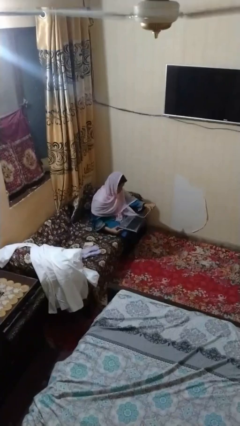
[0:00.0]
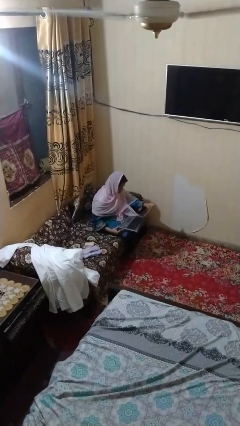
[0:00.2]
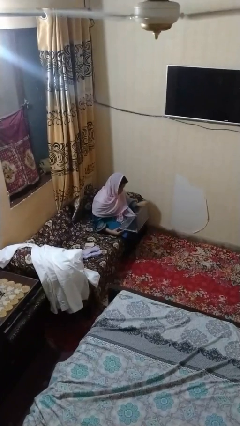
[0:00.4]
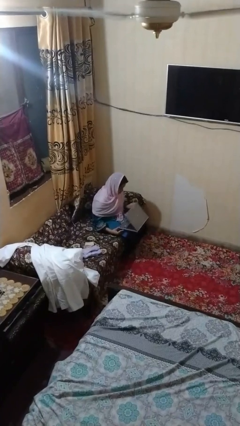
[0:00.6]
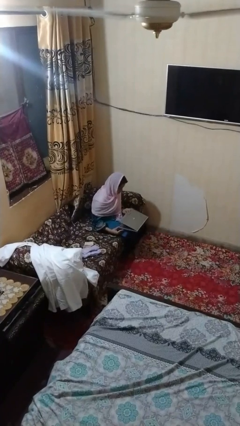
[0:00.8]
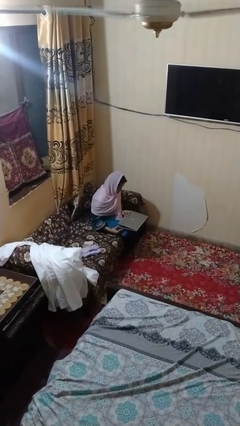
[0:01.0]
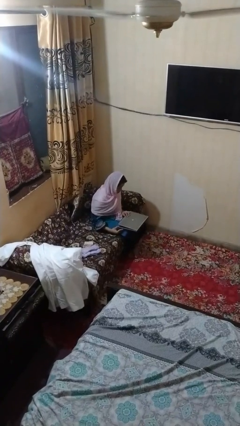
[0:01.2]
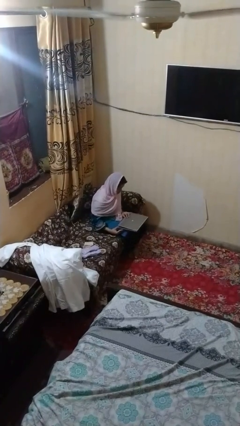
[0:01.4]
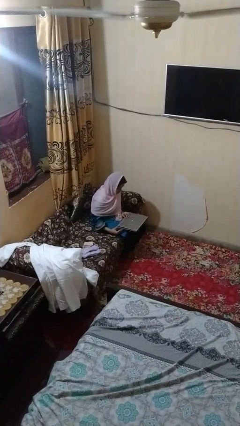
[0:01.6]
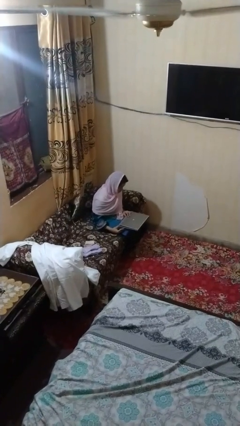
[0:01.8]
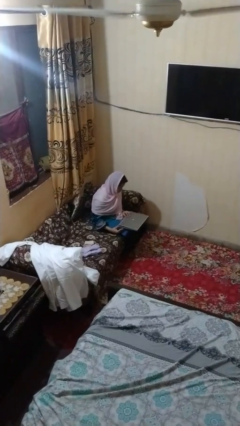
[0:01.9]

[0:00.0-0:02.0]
person closes laptop

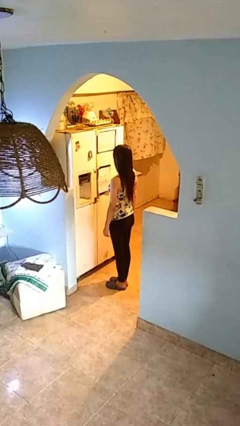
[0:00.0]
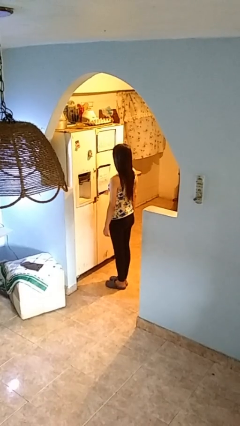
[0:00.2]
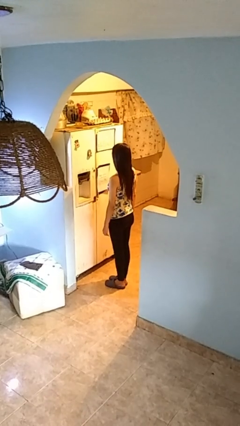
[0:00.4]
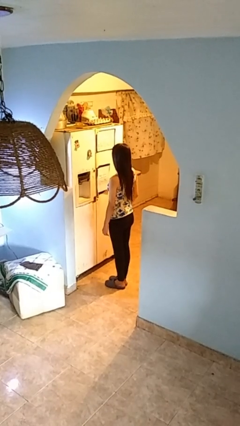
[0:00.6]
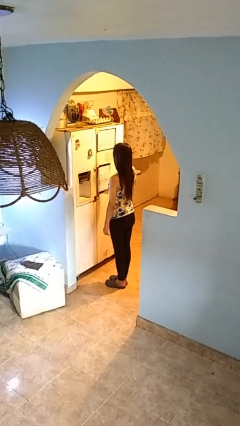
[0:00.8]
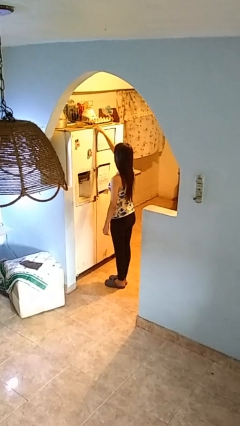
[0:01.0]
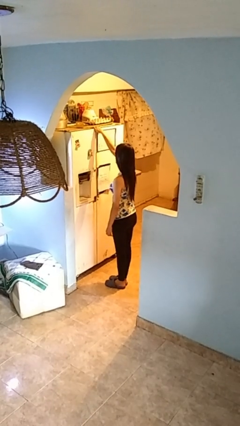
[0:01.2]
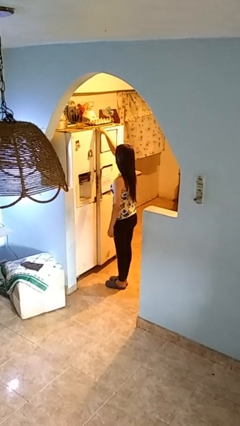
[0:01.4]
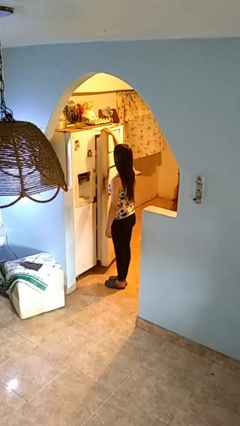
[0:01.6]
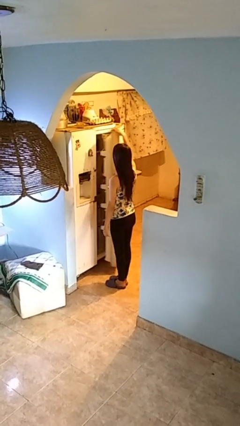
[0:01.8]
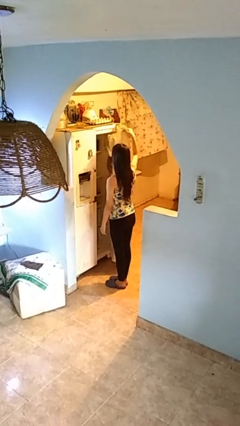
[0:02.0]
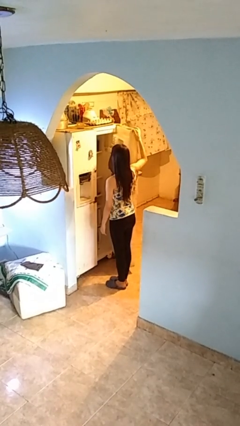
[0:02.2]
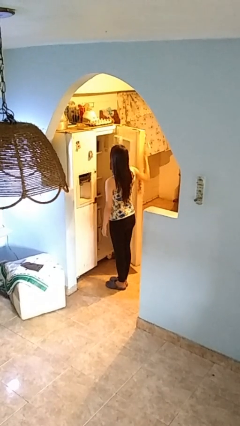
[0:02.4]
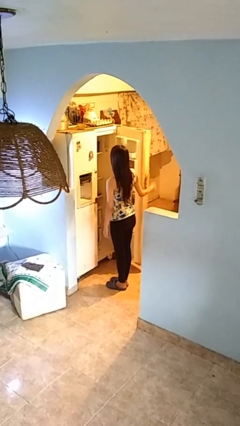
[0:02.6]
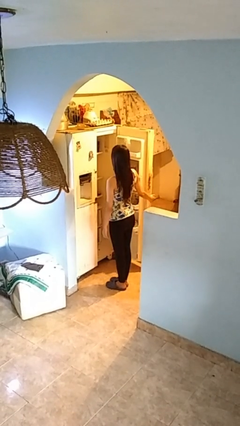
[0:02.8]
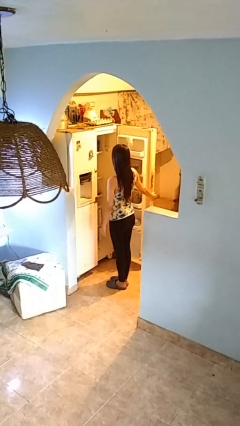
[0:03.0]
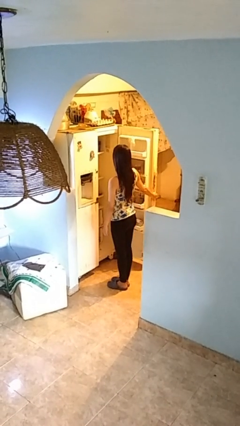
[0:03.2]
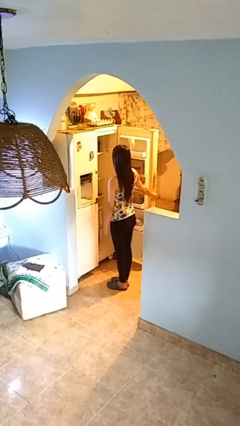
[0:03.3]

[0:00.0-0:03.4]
person opens refrigerator

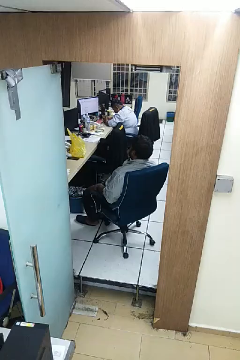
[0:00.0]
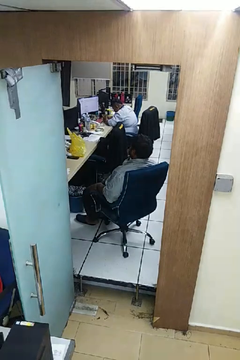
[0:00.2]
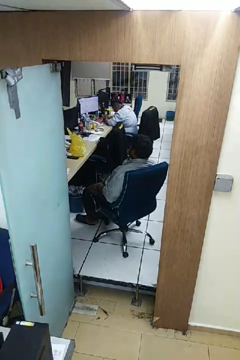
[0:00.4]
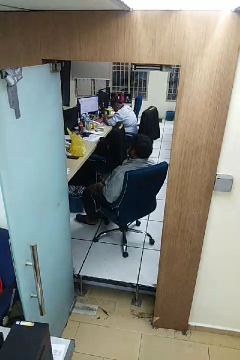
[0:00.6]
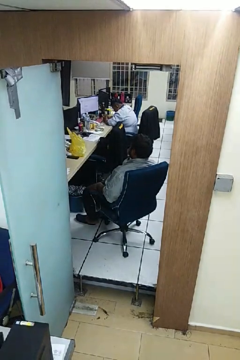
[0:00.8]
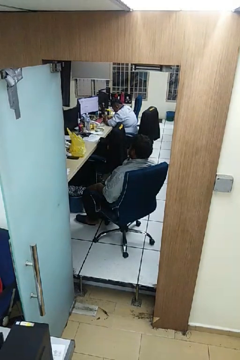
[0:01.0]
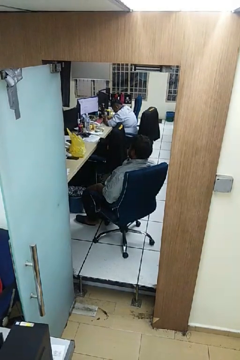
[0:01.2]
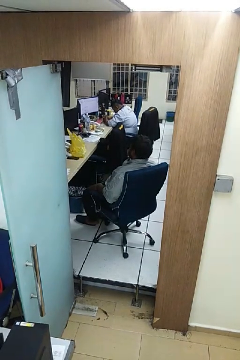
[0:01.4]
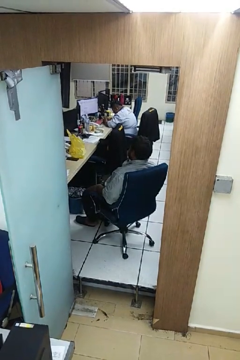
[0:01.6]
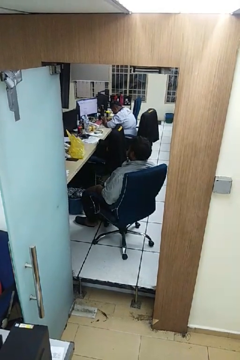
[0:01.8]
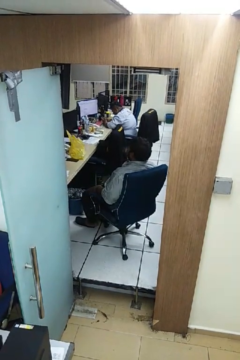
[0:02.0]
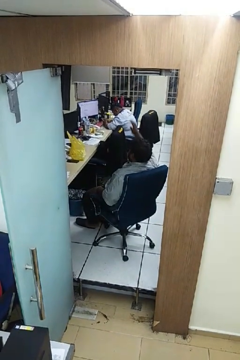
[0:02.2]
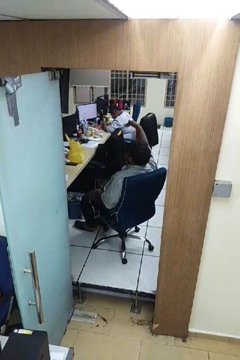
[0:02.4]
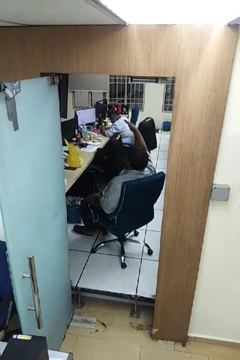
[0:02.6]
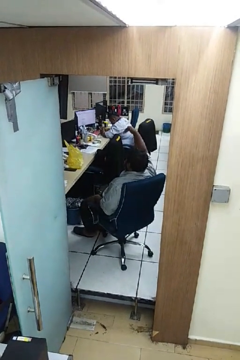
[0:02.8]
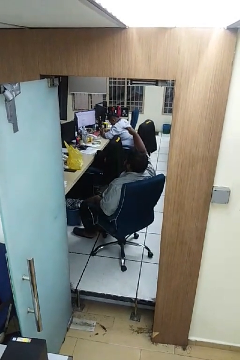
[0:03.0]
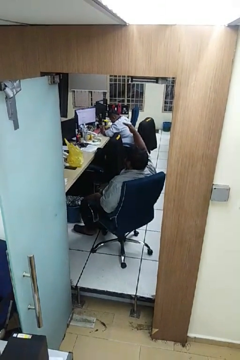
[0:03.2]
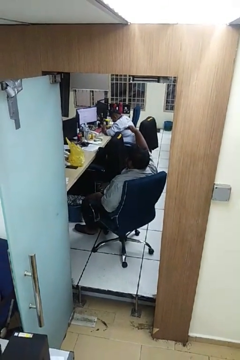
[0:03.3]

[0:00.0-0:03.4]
person gestures come here

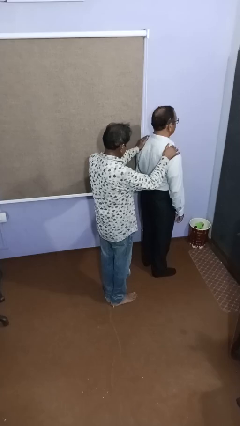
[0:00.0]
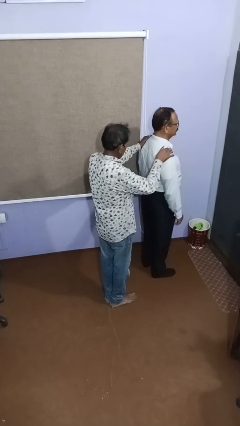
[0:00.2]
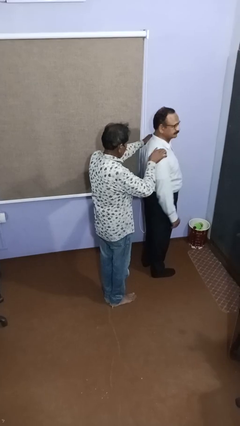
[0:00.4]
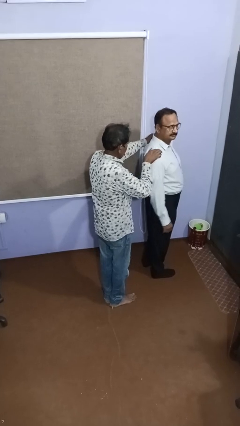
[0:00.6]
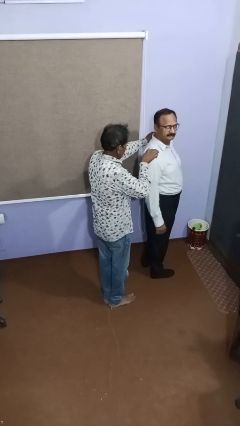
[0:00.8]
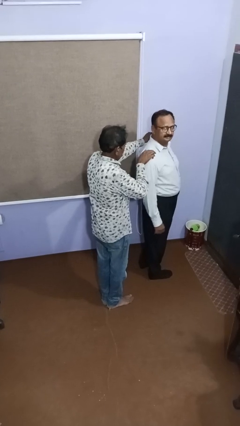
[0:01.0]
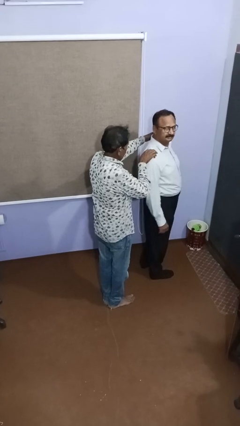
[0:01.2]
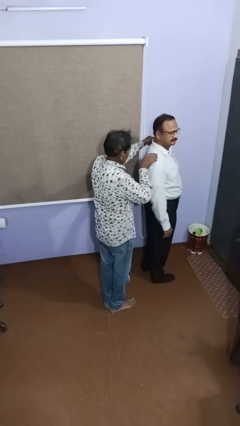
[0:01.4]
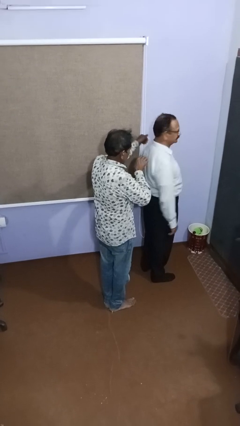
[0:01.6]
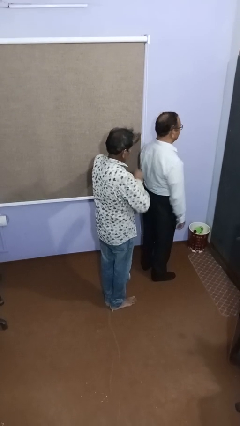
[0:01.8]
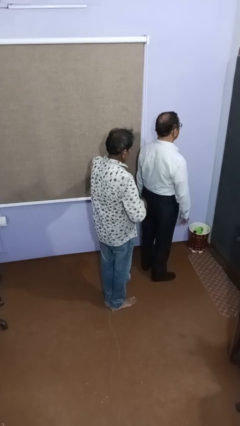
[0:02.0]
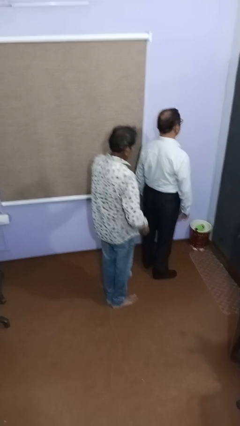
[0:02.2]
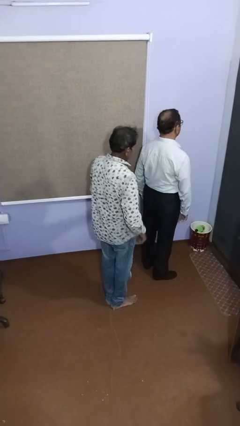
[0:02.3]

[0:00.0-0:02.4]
person spins person around

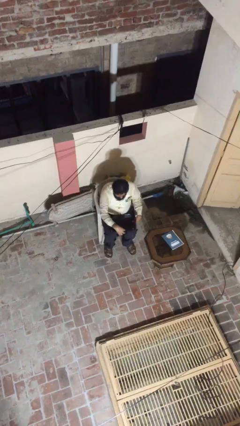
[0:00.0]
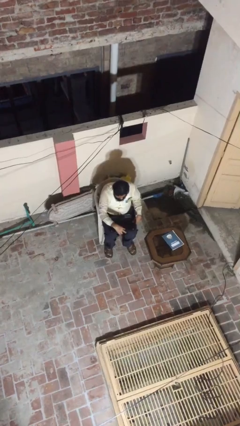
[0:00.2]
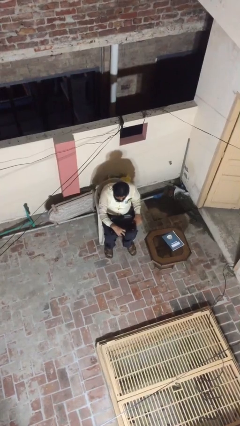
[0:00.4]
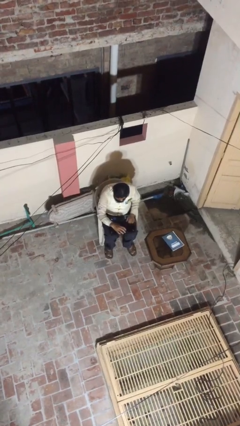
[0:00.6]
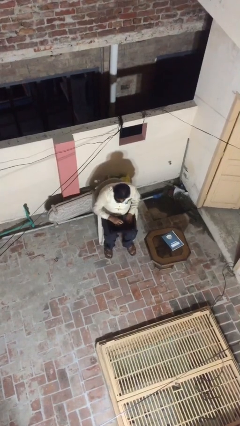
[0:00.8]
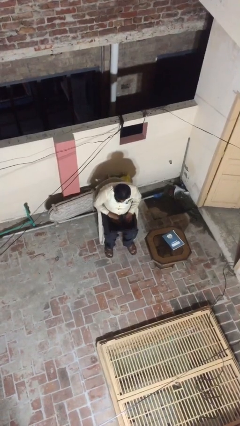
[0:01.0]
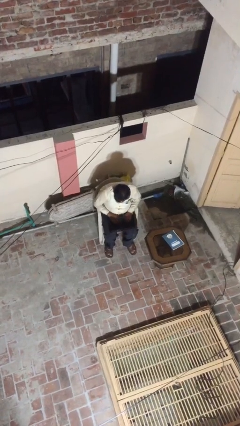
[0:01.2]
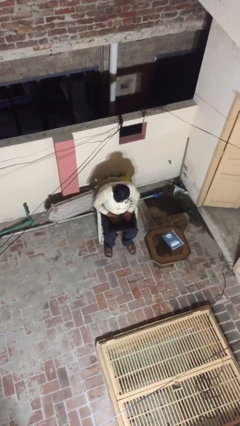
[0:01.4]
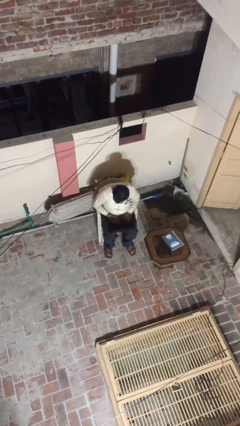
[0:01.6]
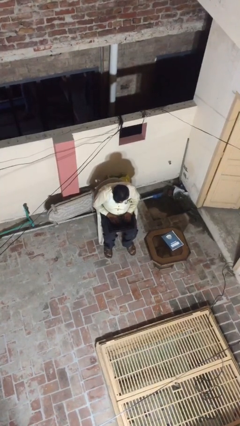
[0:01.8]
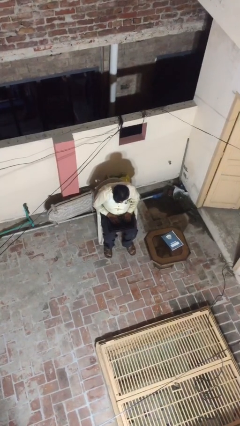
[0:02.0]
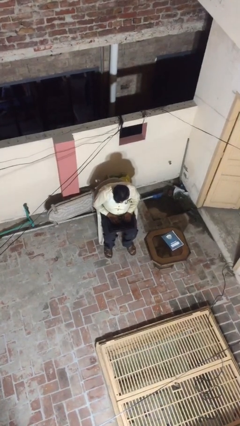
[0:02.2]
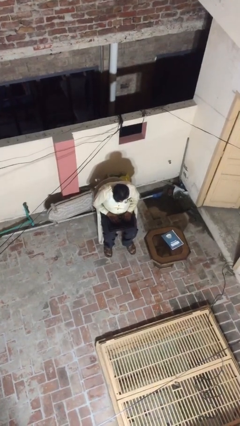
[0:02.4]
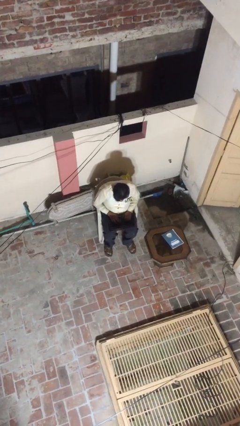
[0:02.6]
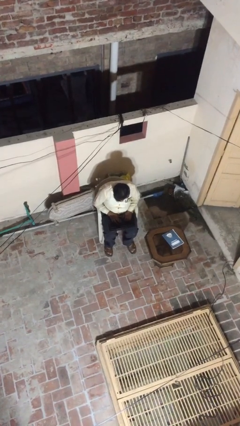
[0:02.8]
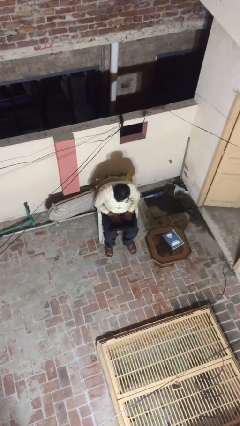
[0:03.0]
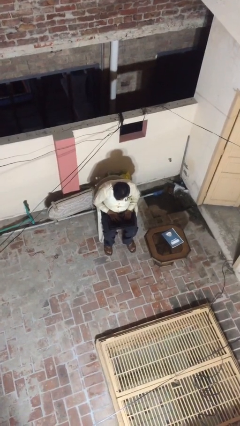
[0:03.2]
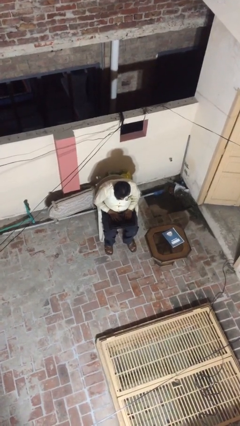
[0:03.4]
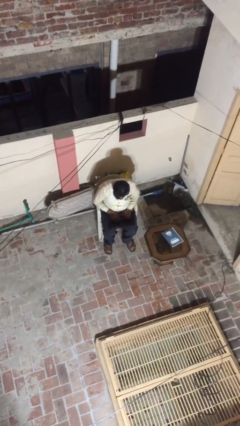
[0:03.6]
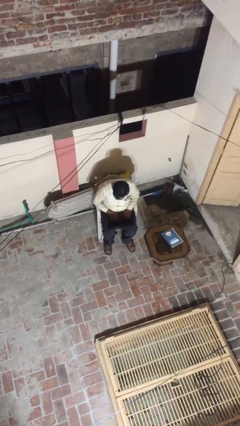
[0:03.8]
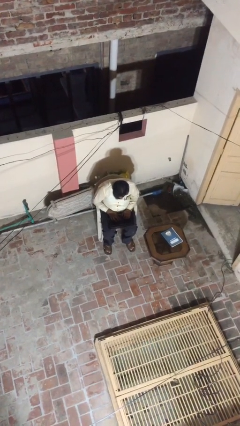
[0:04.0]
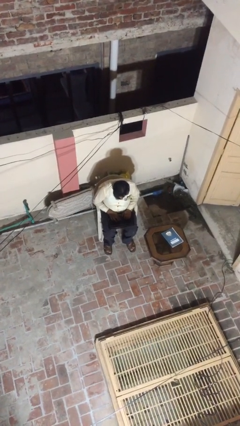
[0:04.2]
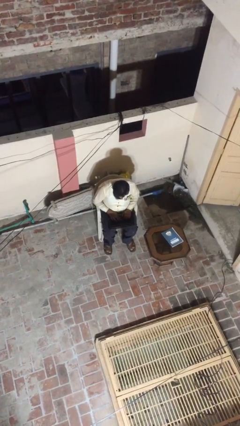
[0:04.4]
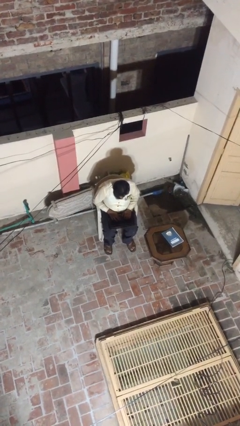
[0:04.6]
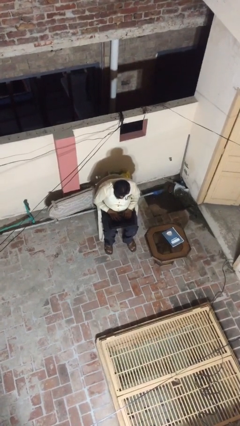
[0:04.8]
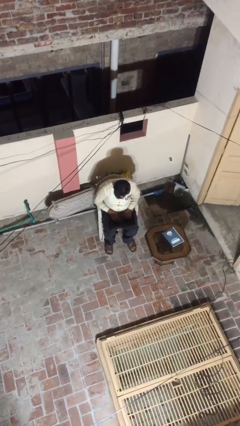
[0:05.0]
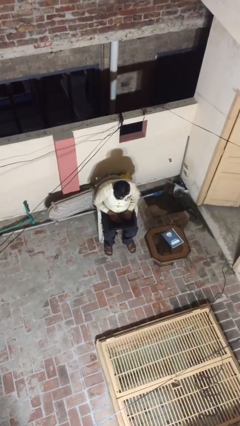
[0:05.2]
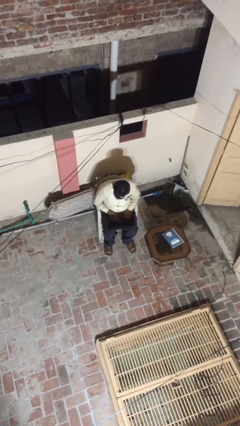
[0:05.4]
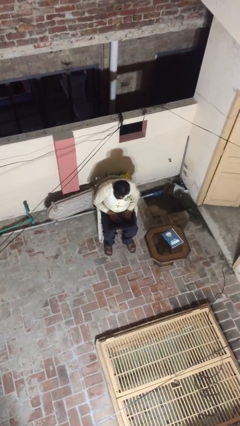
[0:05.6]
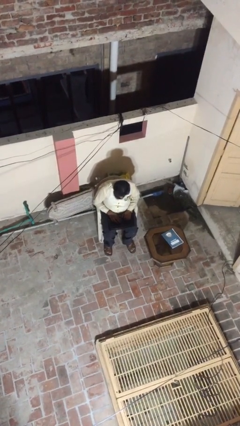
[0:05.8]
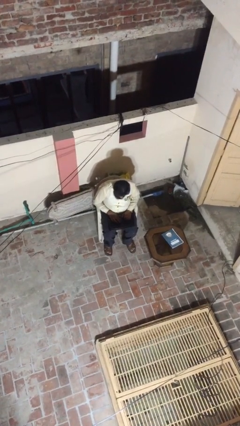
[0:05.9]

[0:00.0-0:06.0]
person interacts with laptop
